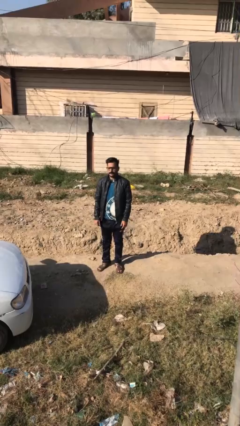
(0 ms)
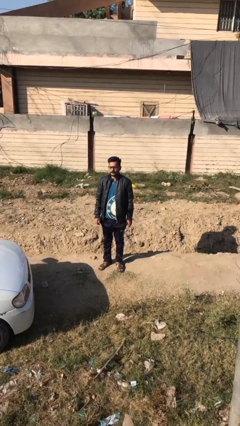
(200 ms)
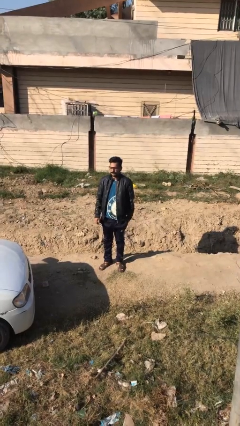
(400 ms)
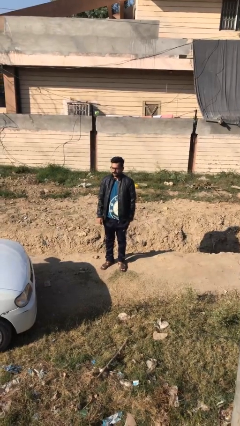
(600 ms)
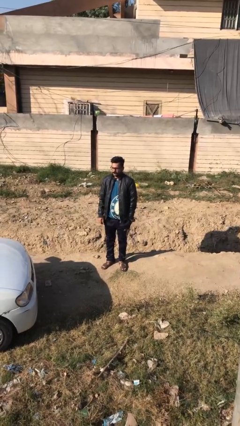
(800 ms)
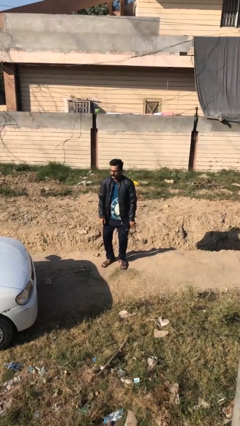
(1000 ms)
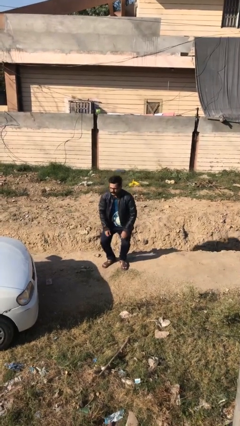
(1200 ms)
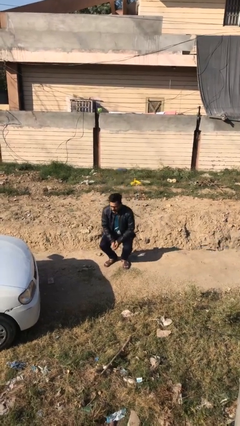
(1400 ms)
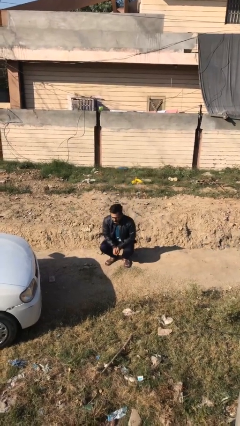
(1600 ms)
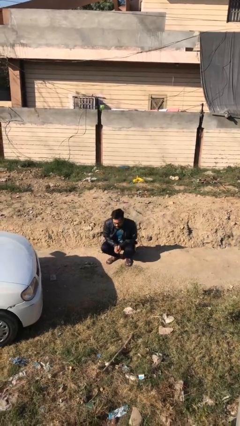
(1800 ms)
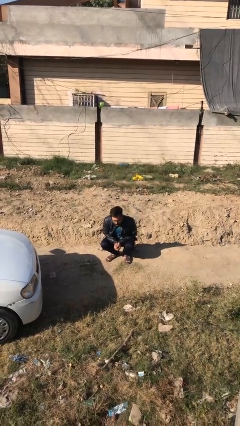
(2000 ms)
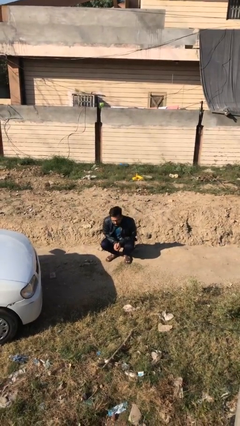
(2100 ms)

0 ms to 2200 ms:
person sits down

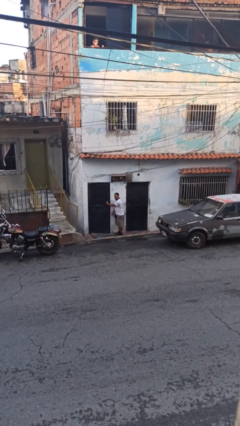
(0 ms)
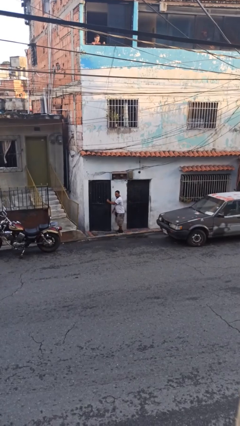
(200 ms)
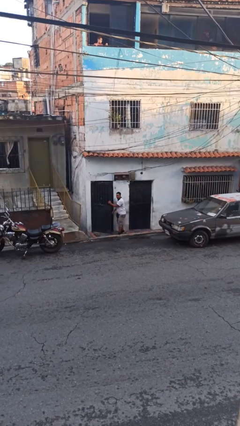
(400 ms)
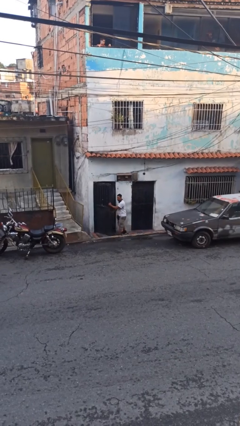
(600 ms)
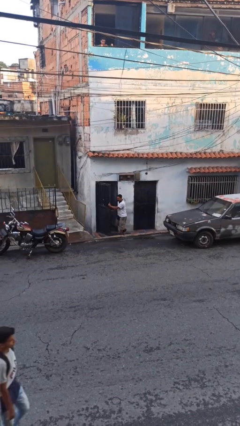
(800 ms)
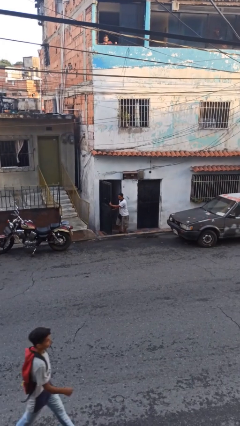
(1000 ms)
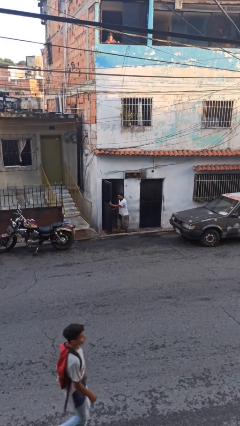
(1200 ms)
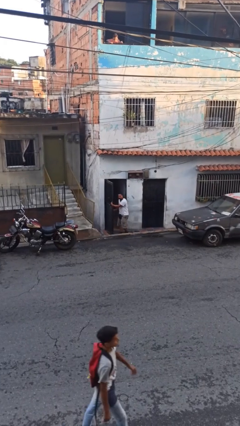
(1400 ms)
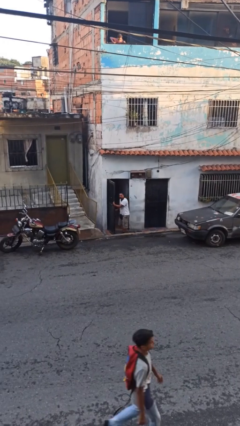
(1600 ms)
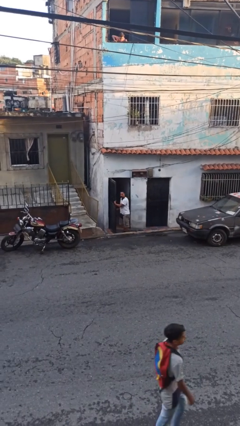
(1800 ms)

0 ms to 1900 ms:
person opens facility door

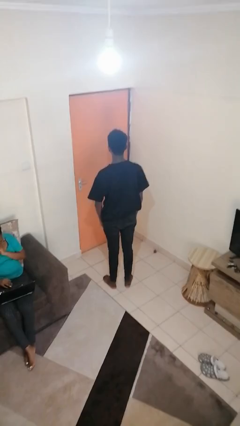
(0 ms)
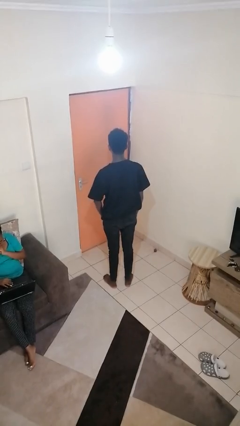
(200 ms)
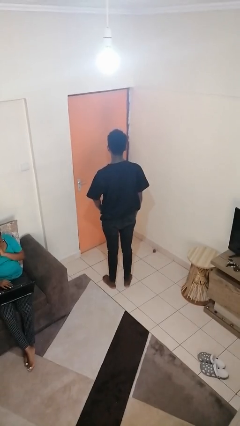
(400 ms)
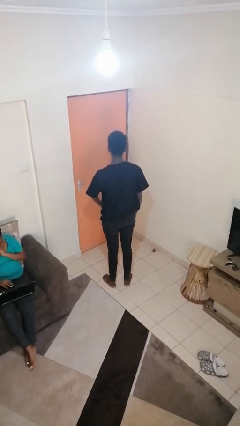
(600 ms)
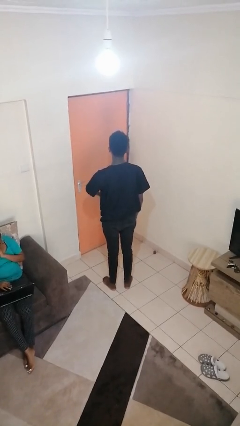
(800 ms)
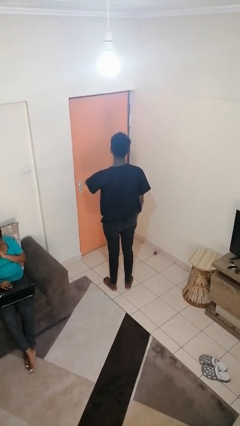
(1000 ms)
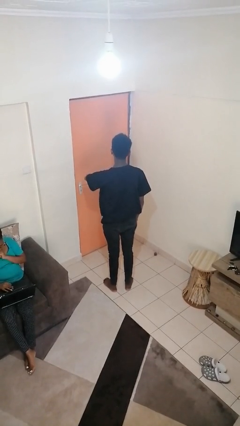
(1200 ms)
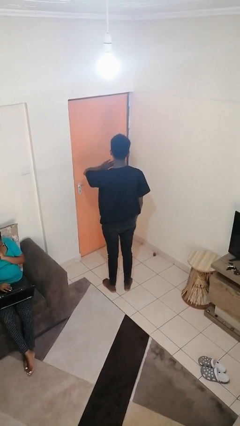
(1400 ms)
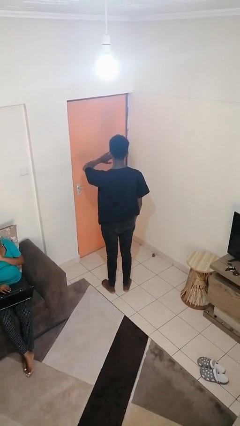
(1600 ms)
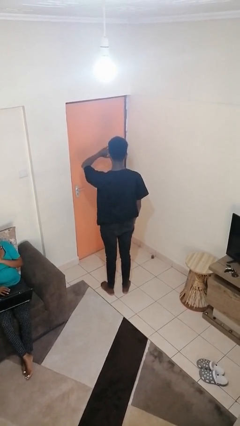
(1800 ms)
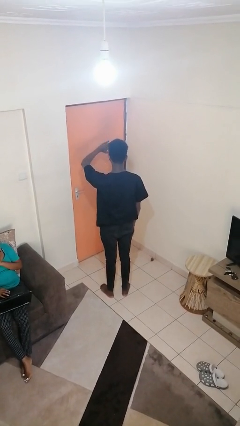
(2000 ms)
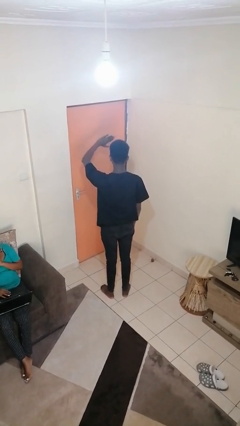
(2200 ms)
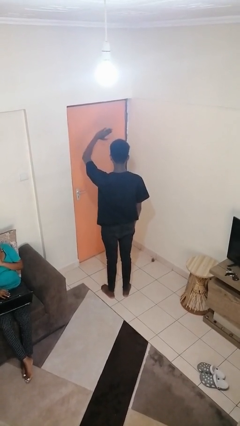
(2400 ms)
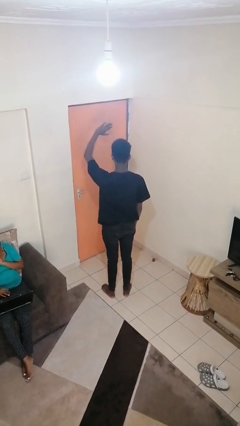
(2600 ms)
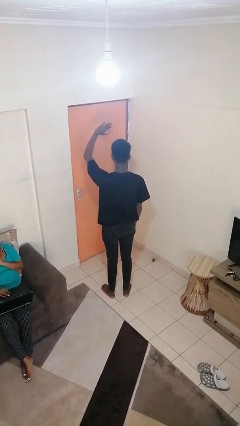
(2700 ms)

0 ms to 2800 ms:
person gestures swipe up

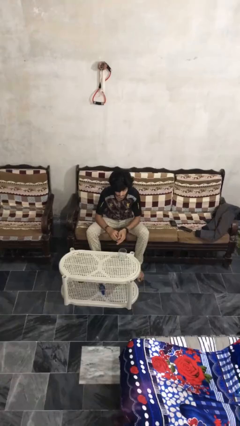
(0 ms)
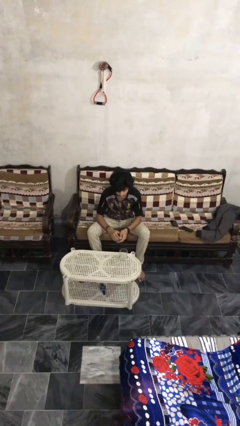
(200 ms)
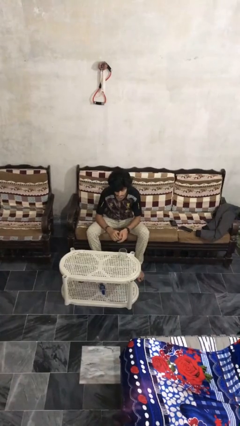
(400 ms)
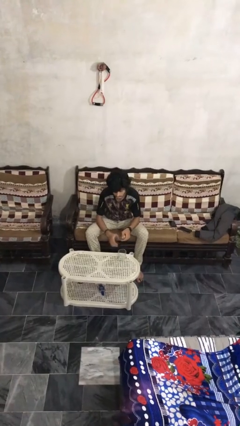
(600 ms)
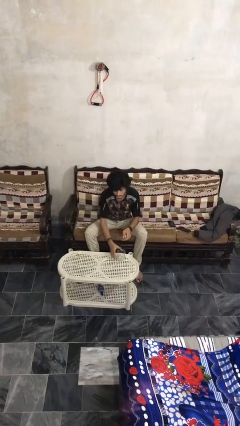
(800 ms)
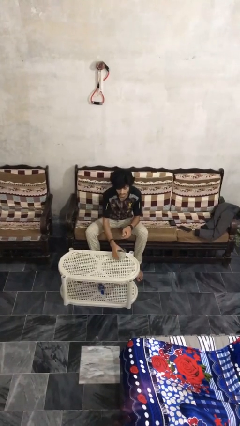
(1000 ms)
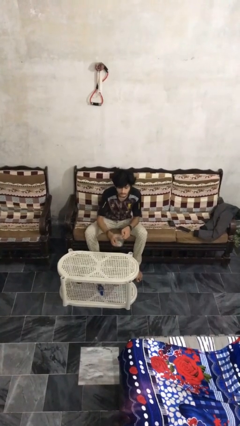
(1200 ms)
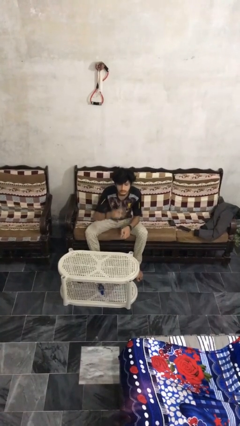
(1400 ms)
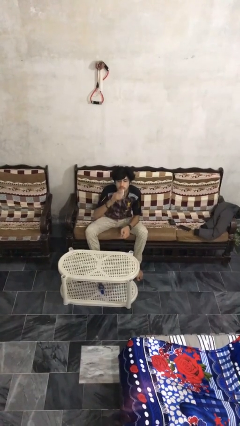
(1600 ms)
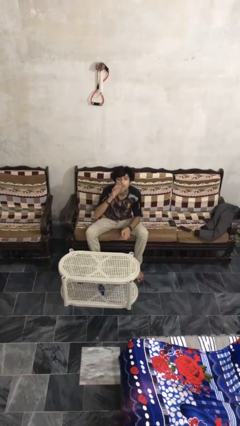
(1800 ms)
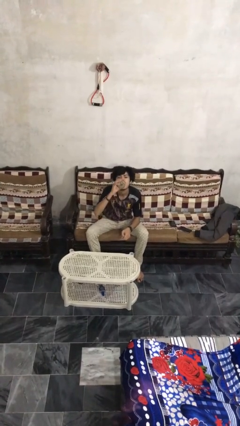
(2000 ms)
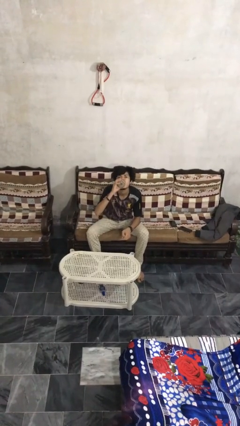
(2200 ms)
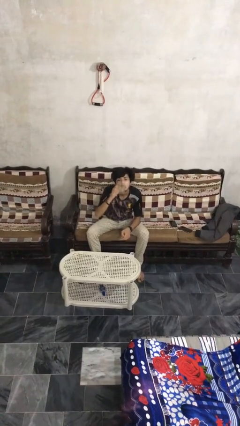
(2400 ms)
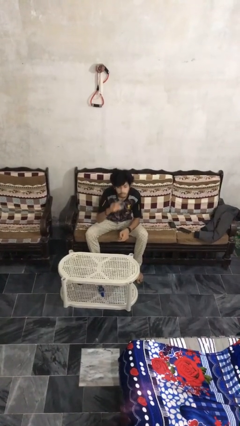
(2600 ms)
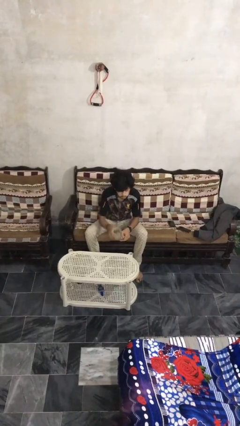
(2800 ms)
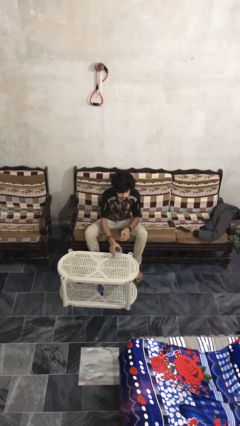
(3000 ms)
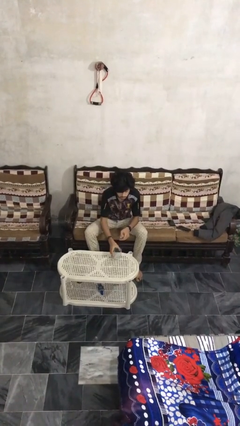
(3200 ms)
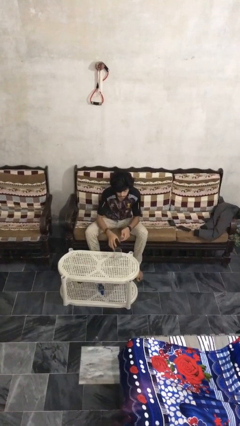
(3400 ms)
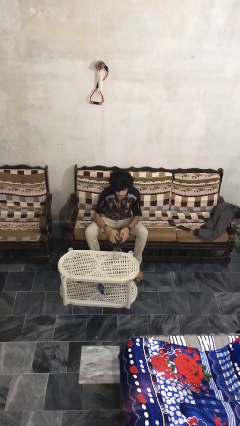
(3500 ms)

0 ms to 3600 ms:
person drinks from cup

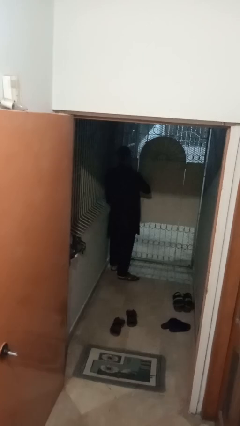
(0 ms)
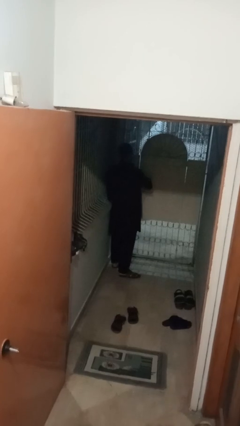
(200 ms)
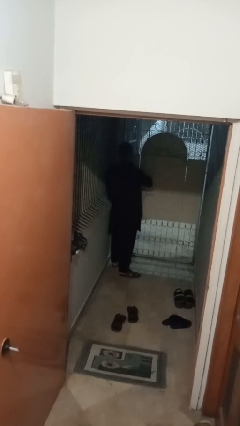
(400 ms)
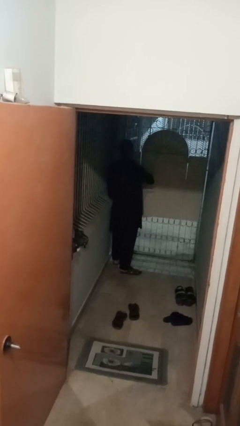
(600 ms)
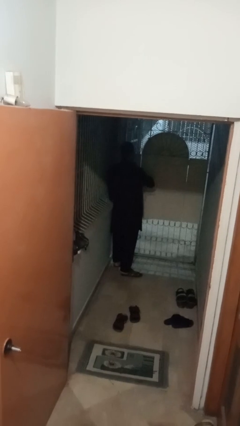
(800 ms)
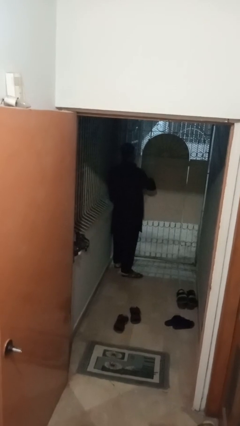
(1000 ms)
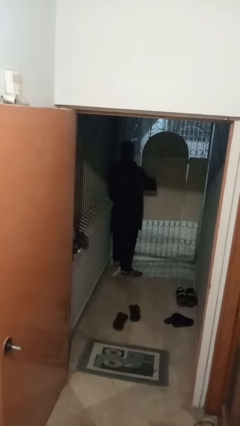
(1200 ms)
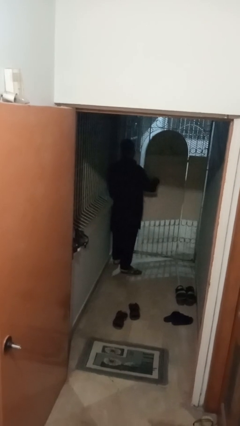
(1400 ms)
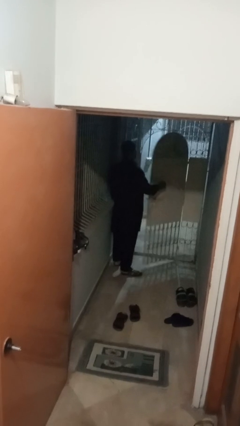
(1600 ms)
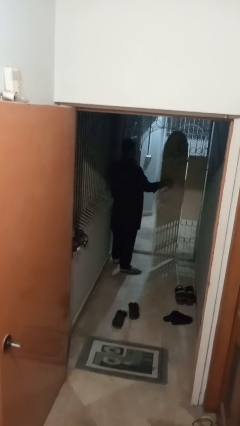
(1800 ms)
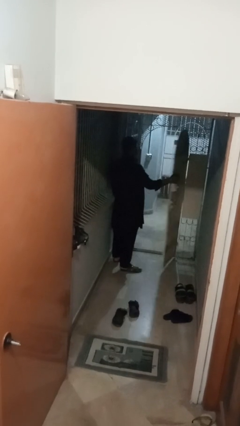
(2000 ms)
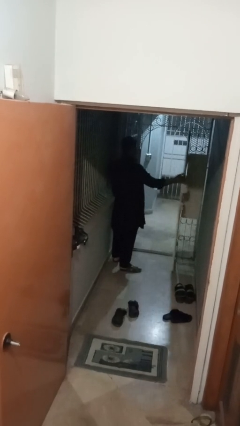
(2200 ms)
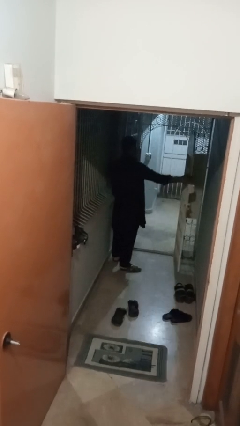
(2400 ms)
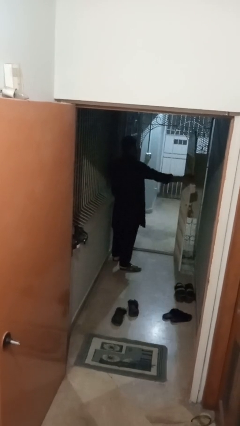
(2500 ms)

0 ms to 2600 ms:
person opens gate

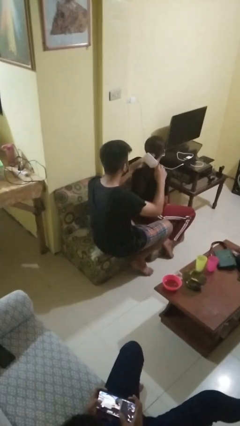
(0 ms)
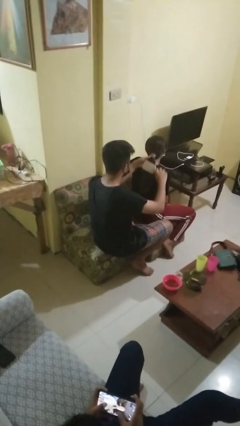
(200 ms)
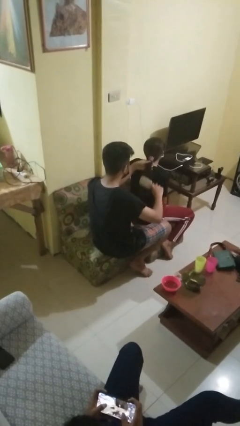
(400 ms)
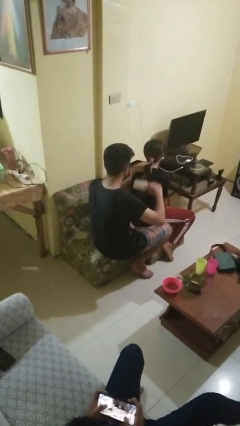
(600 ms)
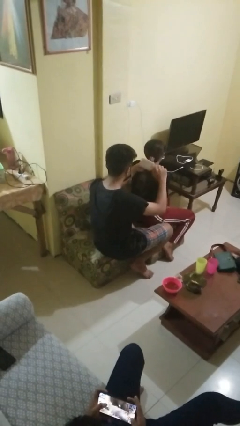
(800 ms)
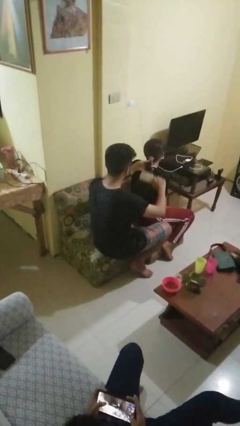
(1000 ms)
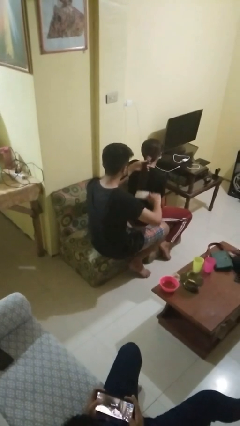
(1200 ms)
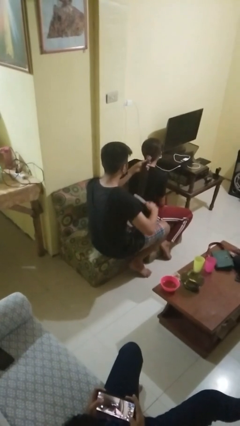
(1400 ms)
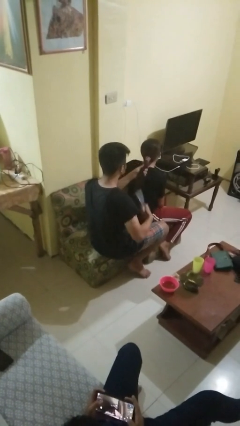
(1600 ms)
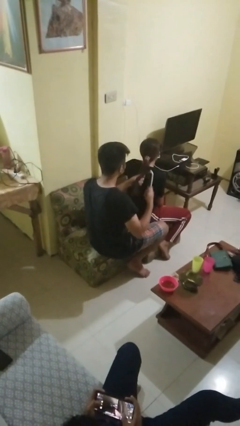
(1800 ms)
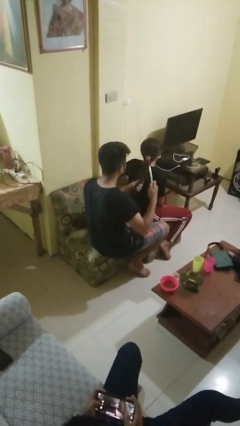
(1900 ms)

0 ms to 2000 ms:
person brushes hair of person

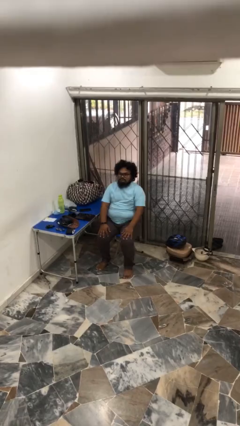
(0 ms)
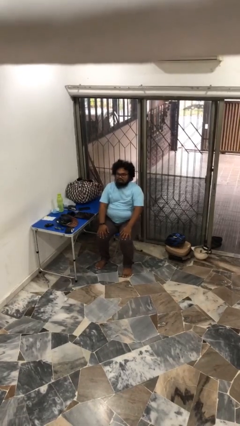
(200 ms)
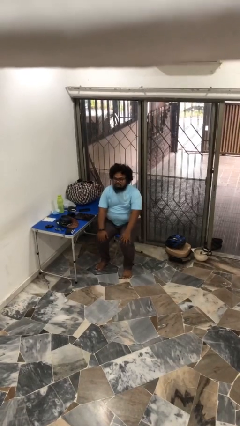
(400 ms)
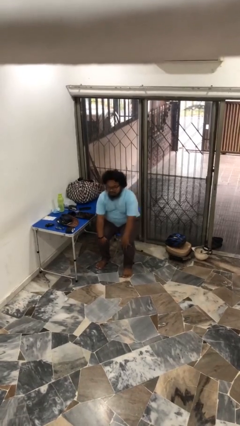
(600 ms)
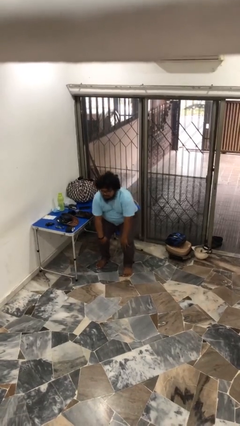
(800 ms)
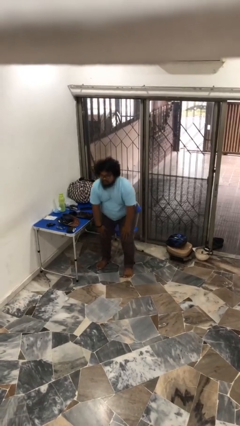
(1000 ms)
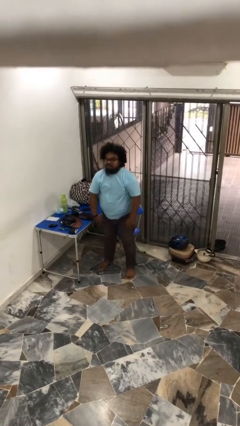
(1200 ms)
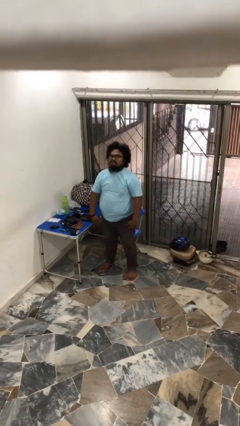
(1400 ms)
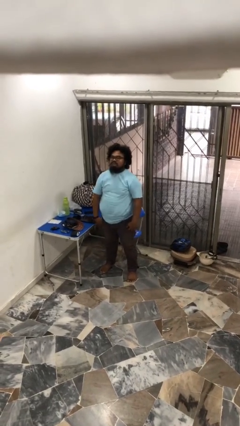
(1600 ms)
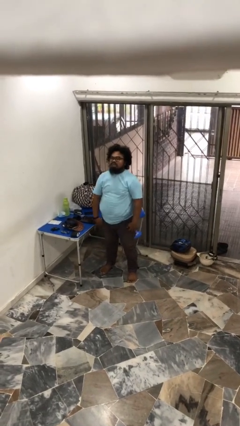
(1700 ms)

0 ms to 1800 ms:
person stands up

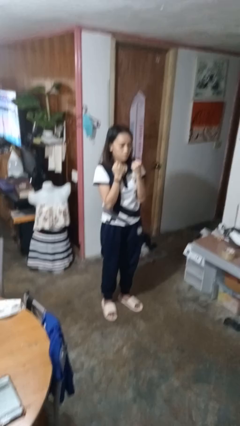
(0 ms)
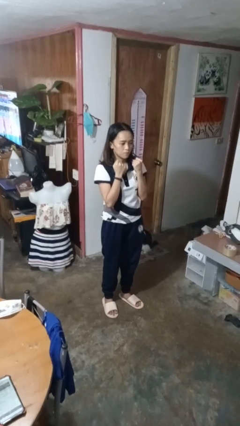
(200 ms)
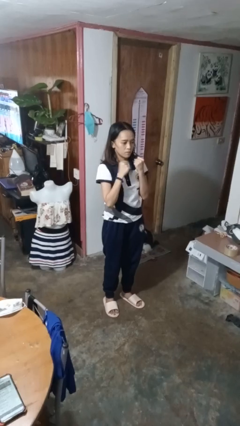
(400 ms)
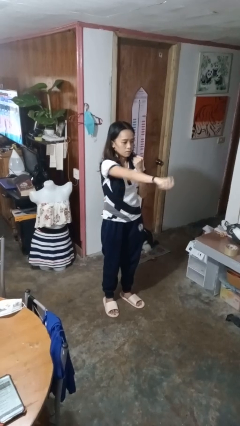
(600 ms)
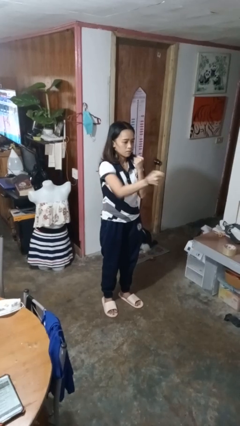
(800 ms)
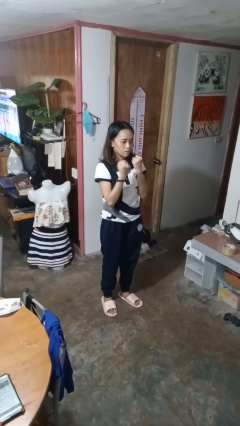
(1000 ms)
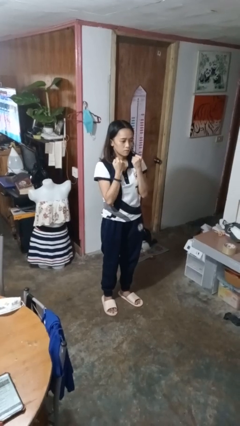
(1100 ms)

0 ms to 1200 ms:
person punches
